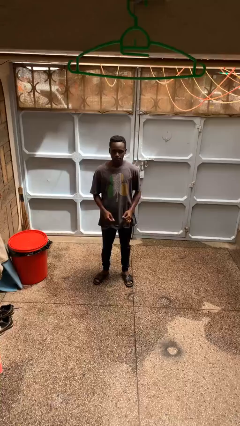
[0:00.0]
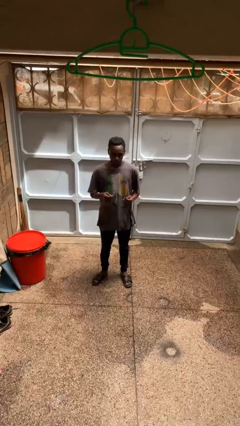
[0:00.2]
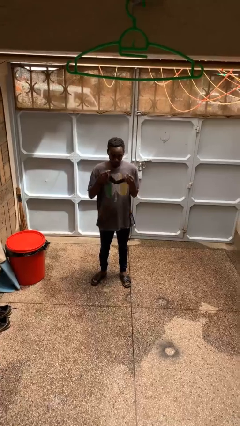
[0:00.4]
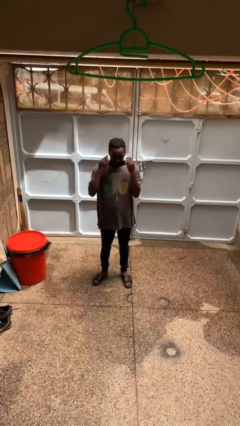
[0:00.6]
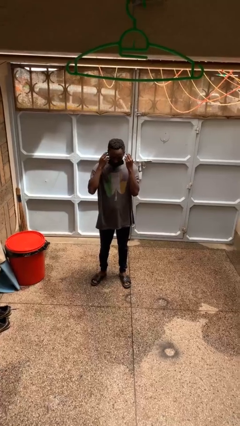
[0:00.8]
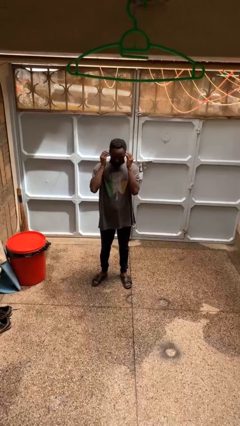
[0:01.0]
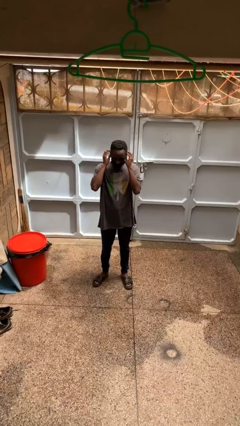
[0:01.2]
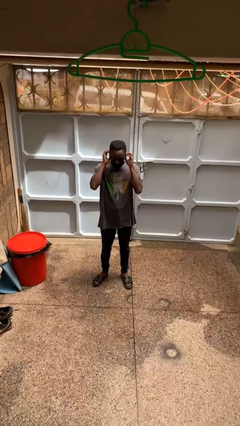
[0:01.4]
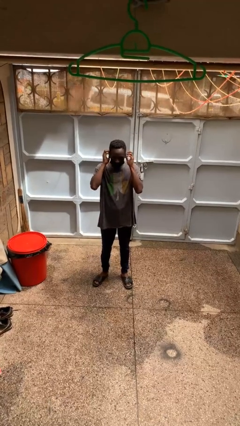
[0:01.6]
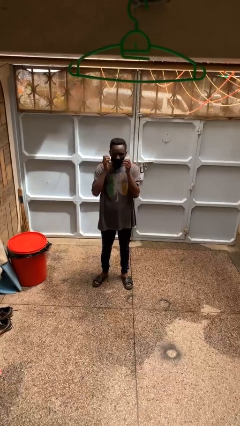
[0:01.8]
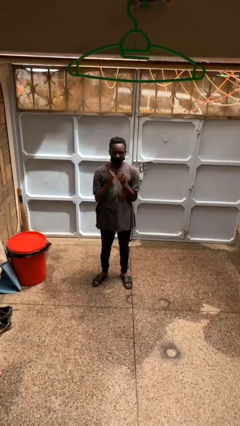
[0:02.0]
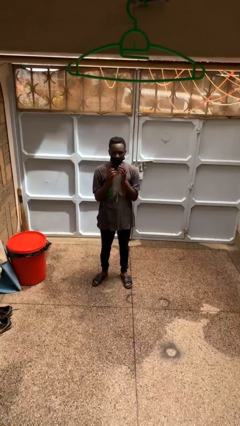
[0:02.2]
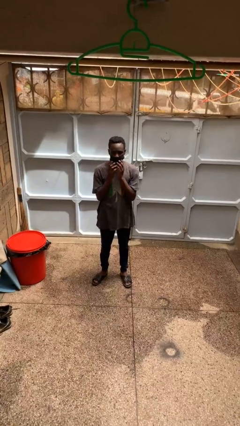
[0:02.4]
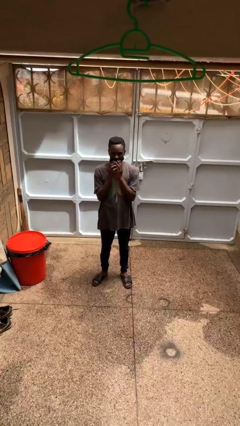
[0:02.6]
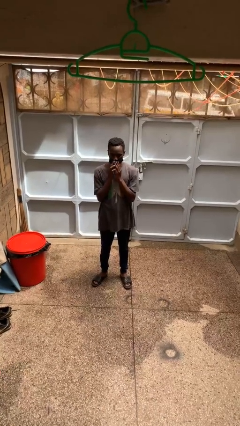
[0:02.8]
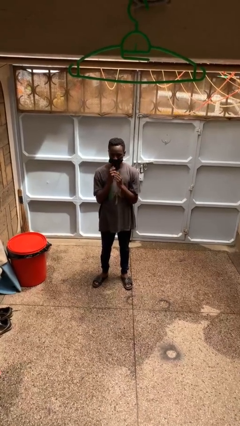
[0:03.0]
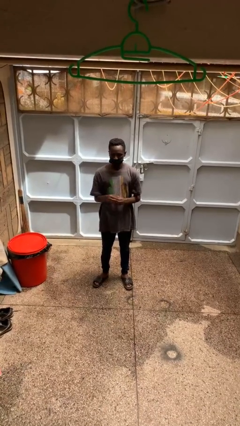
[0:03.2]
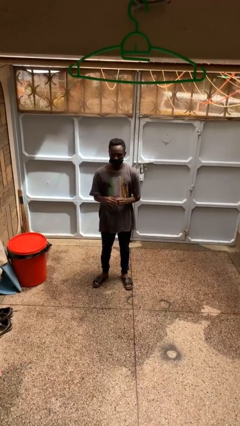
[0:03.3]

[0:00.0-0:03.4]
person puts on facemask

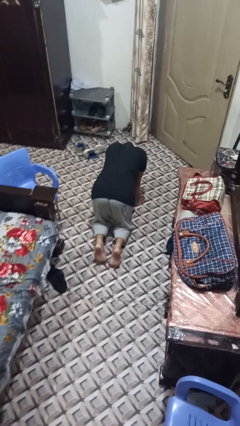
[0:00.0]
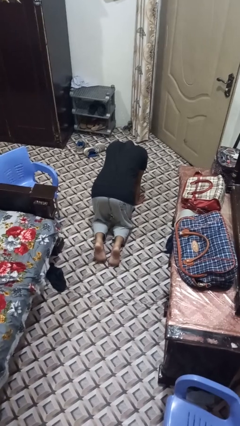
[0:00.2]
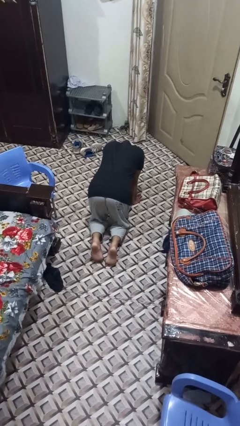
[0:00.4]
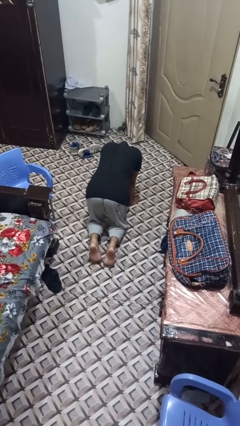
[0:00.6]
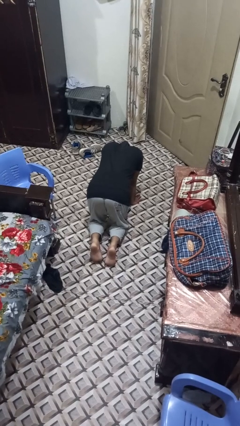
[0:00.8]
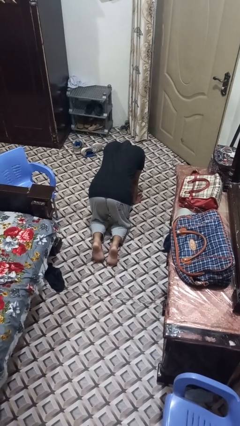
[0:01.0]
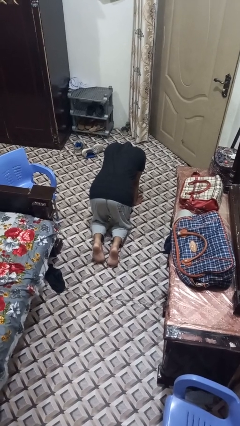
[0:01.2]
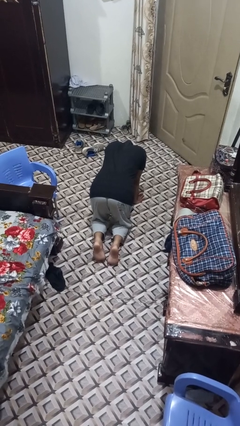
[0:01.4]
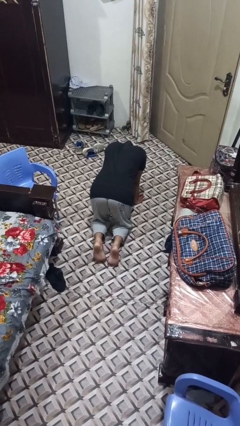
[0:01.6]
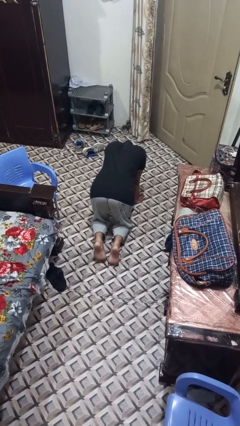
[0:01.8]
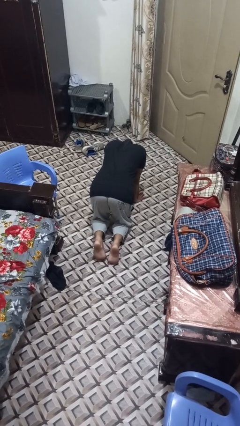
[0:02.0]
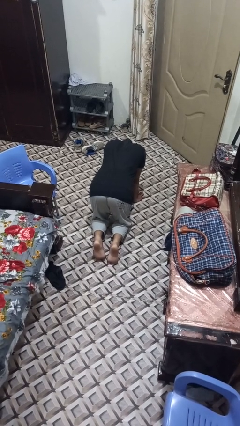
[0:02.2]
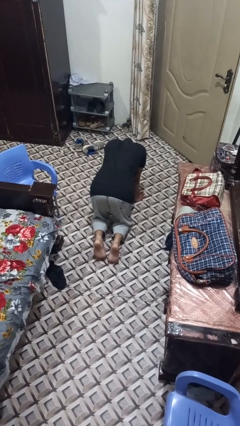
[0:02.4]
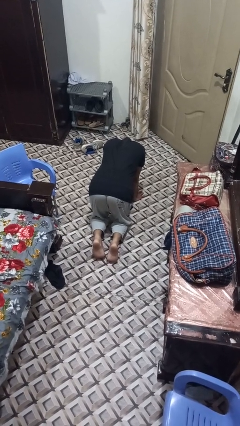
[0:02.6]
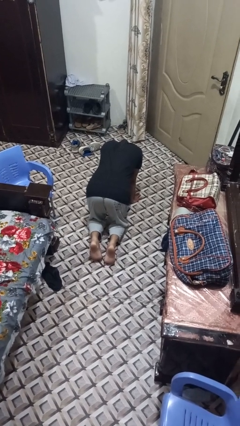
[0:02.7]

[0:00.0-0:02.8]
person crawls

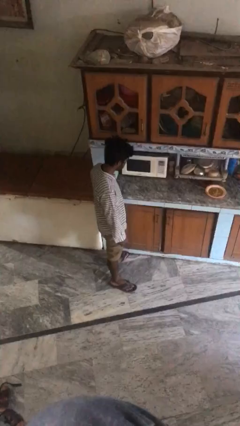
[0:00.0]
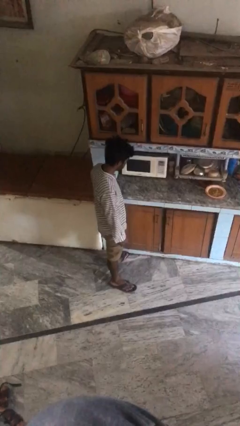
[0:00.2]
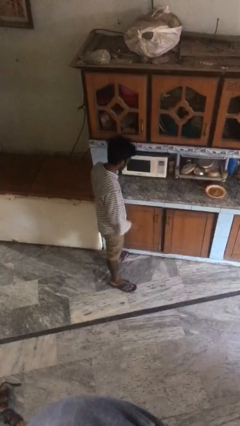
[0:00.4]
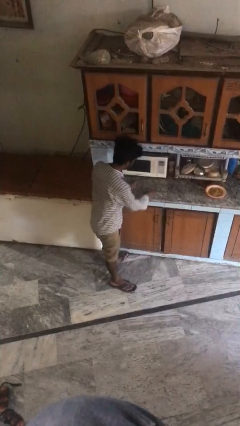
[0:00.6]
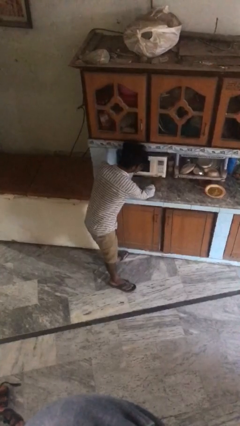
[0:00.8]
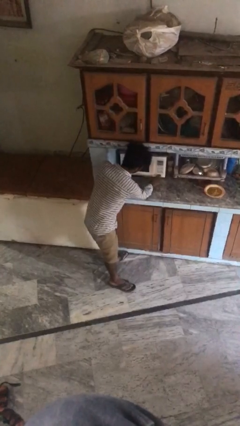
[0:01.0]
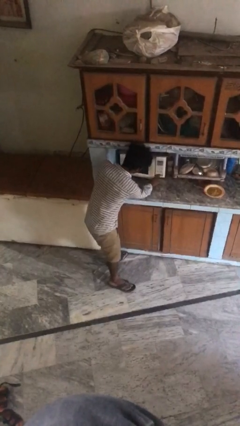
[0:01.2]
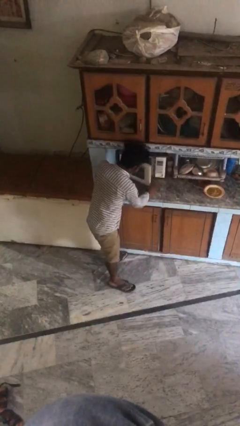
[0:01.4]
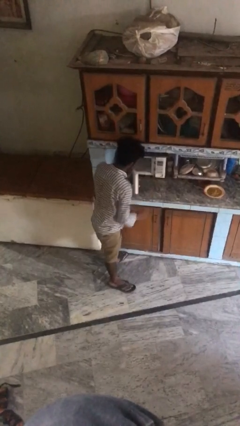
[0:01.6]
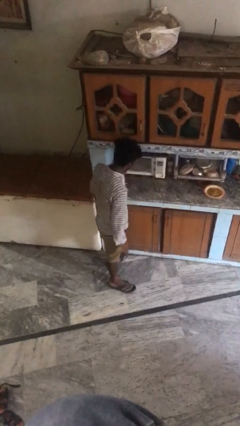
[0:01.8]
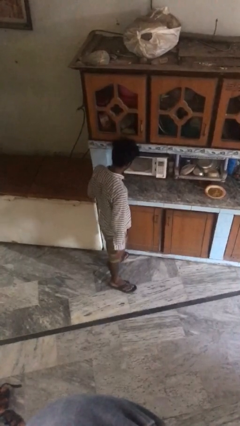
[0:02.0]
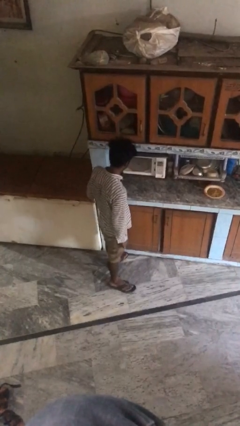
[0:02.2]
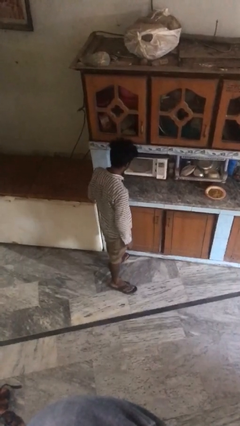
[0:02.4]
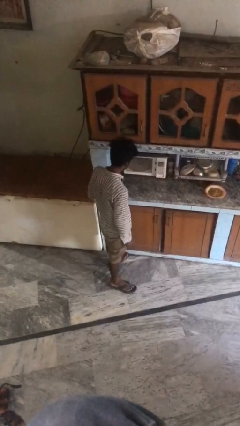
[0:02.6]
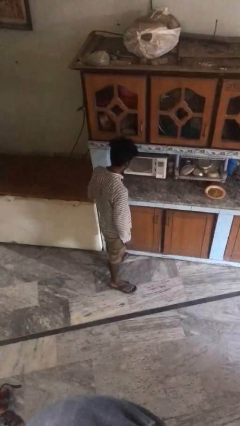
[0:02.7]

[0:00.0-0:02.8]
person opens oven door

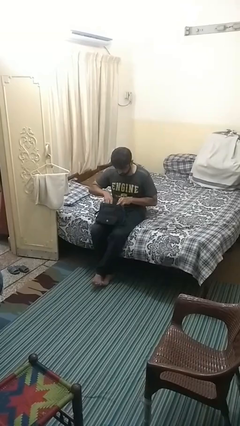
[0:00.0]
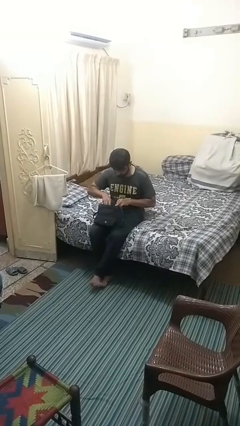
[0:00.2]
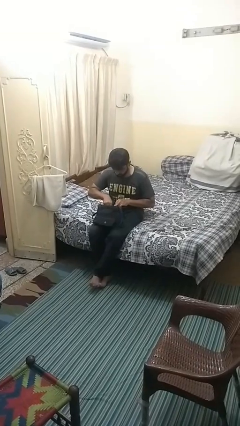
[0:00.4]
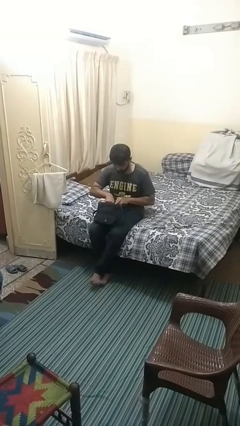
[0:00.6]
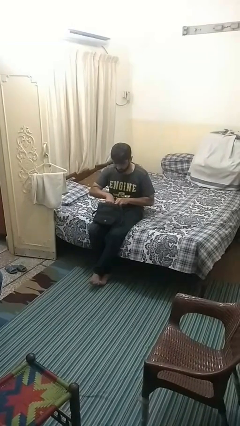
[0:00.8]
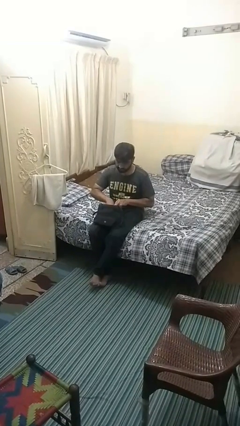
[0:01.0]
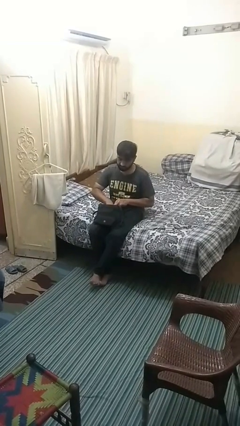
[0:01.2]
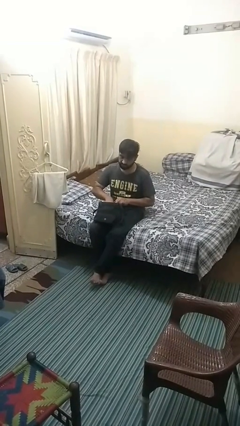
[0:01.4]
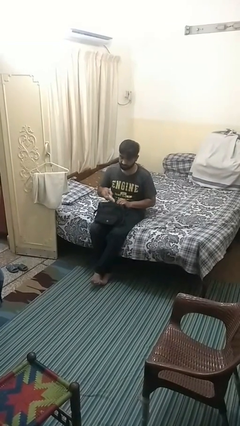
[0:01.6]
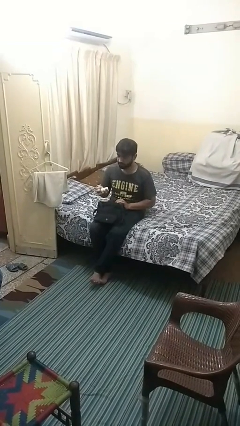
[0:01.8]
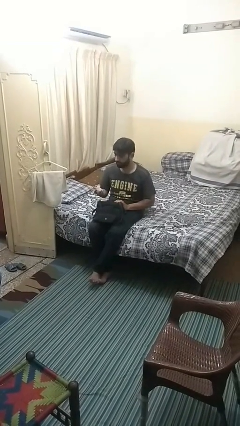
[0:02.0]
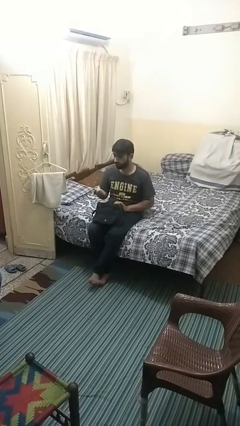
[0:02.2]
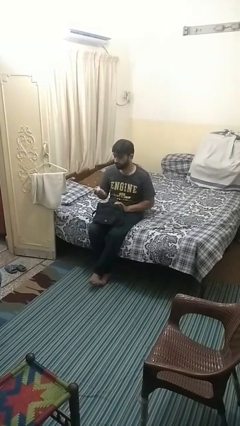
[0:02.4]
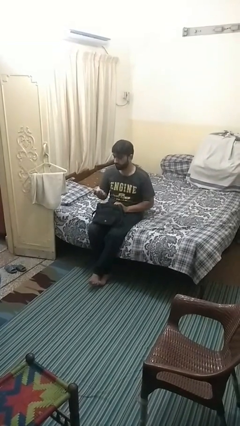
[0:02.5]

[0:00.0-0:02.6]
person takes object from purse

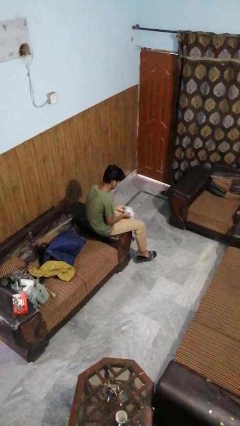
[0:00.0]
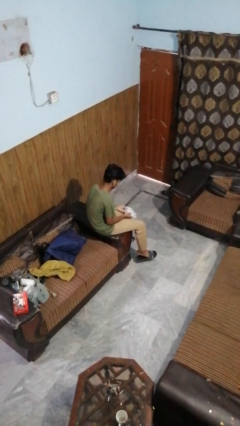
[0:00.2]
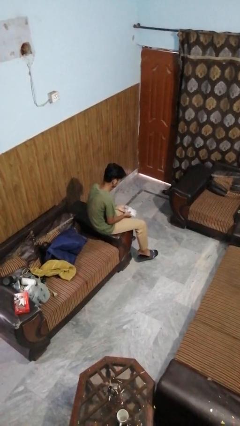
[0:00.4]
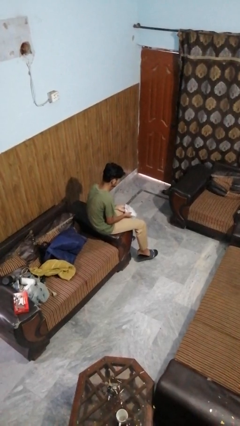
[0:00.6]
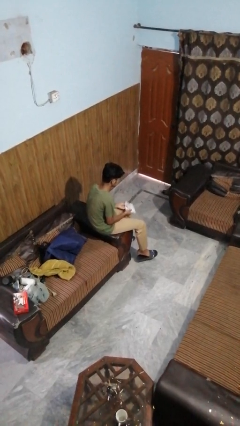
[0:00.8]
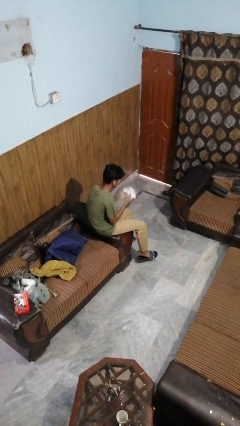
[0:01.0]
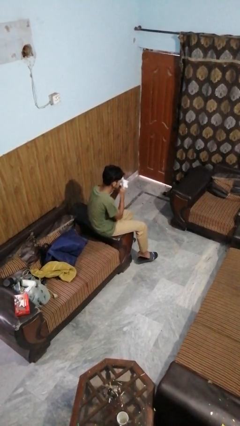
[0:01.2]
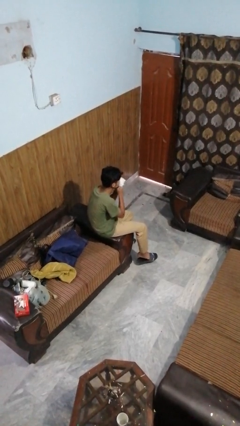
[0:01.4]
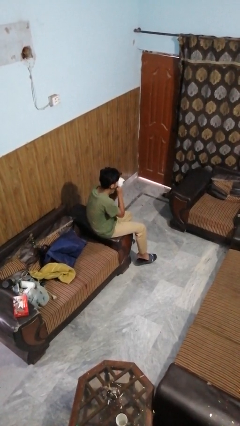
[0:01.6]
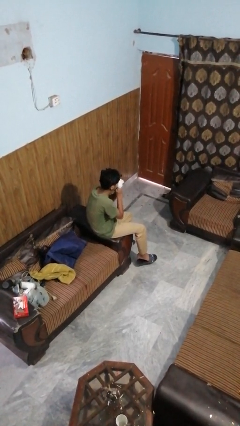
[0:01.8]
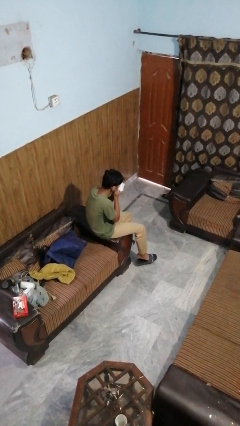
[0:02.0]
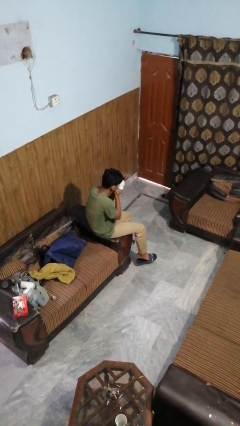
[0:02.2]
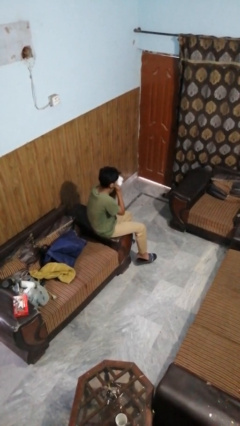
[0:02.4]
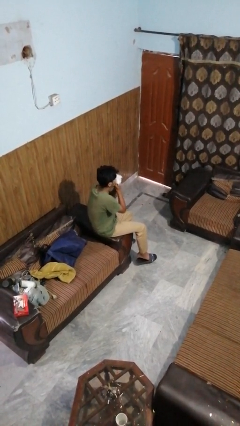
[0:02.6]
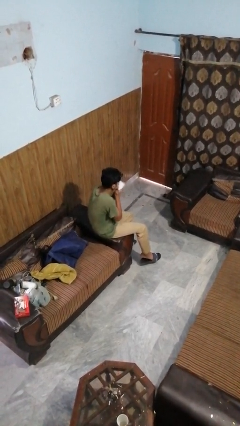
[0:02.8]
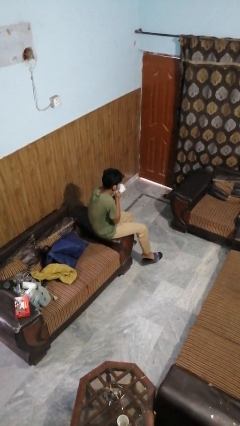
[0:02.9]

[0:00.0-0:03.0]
person blows nose

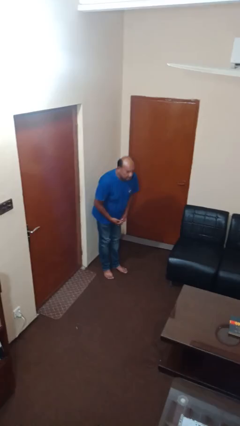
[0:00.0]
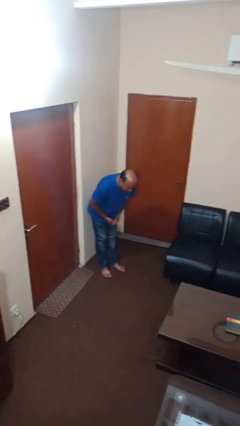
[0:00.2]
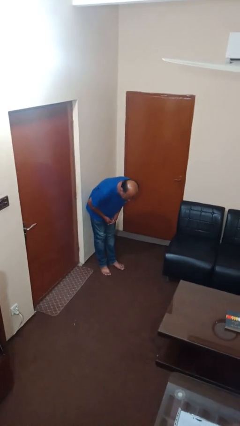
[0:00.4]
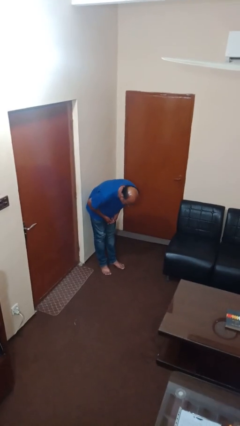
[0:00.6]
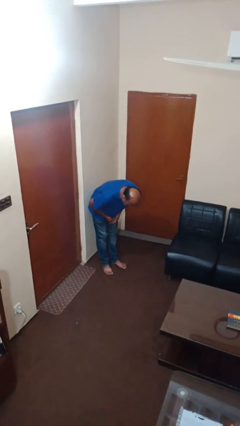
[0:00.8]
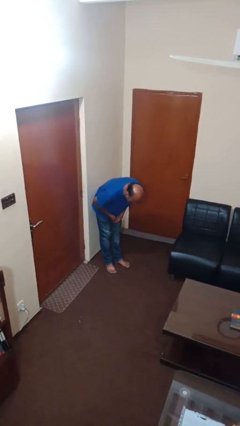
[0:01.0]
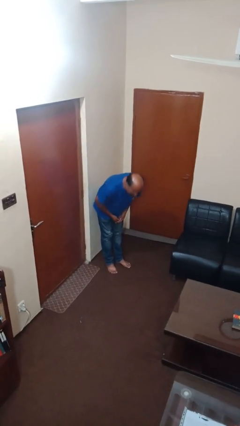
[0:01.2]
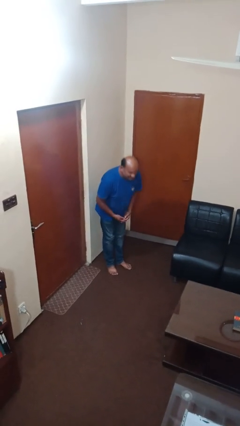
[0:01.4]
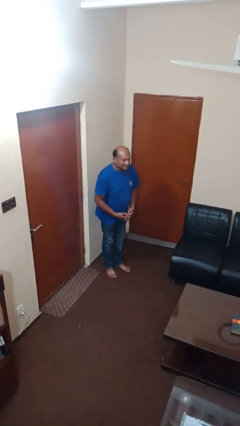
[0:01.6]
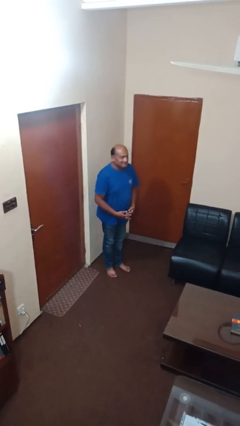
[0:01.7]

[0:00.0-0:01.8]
person bows

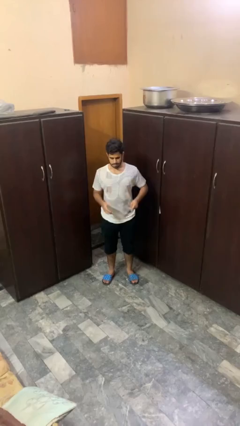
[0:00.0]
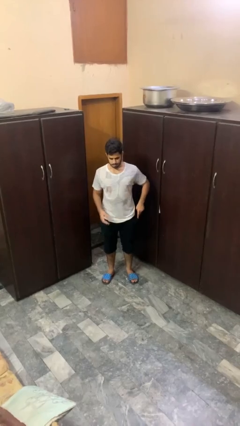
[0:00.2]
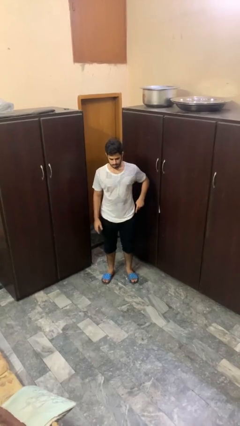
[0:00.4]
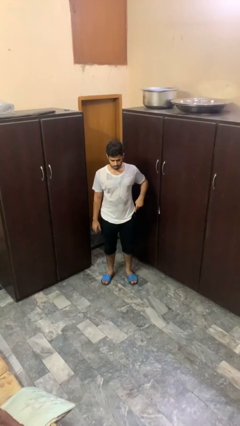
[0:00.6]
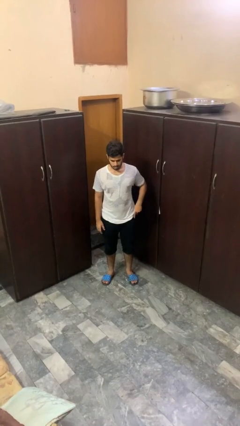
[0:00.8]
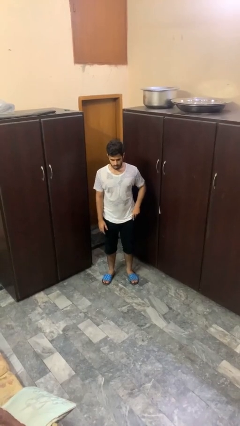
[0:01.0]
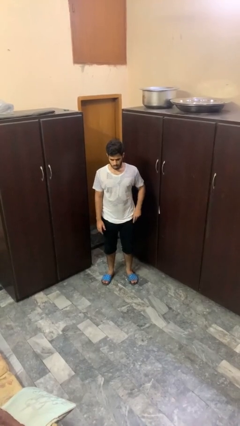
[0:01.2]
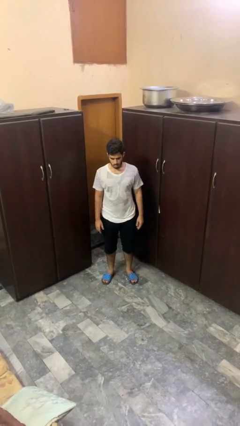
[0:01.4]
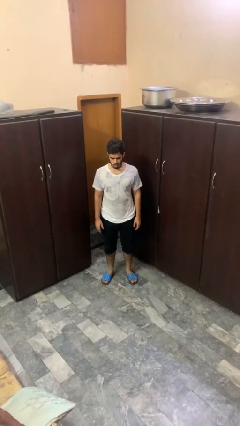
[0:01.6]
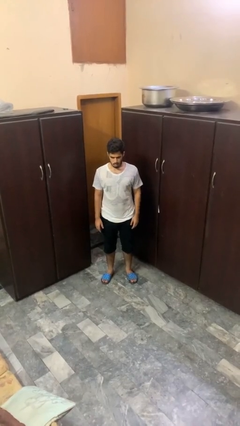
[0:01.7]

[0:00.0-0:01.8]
person puts phone into pocket
